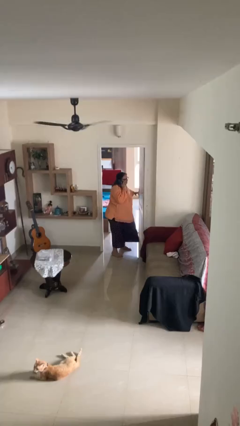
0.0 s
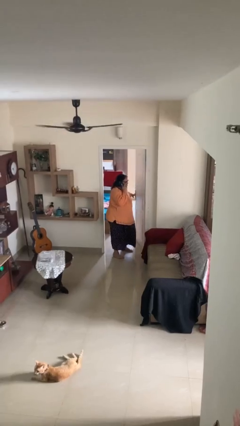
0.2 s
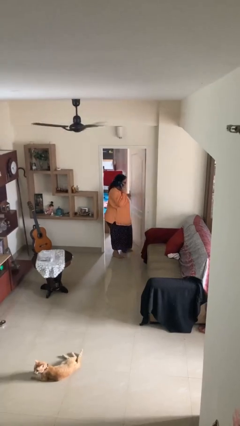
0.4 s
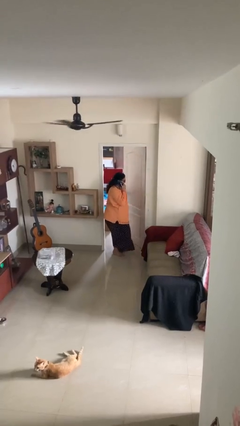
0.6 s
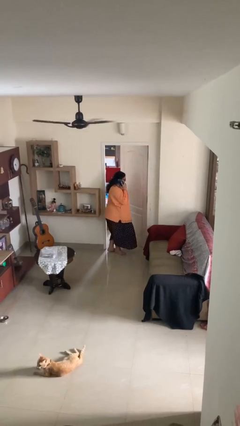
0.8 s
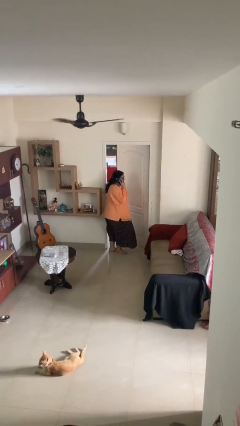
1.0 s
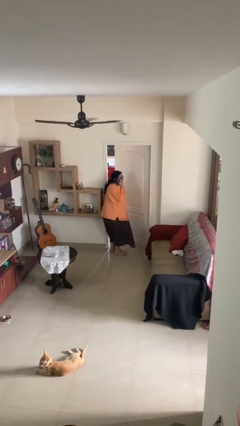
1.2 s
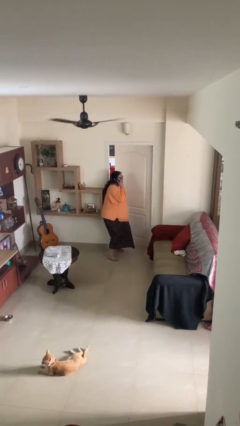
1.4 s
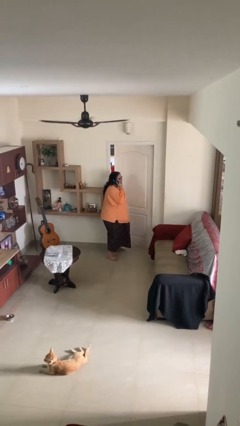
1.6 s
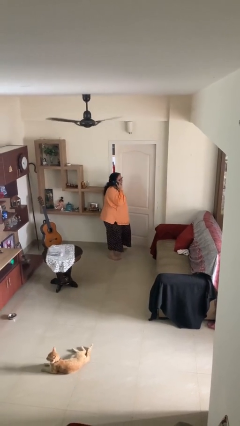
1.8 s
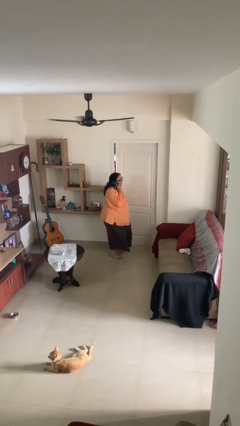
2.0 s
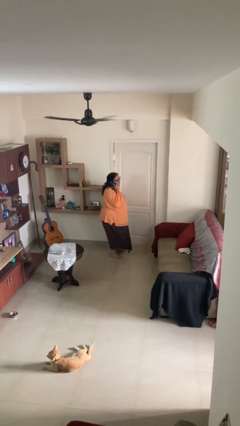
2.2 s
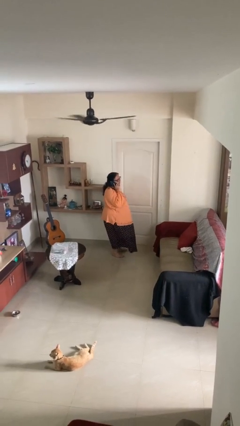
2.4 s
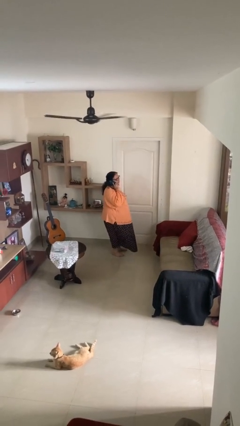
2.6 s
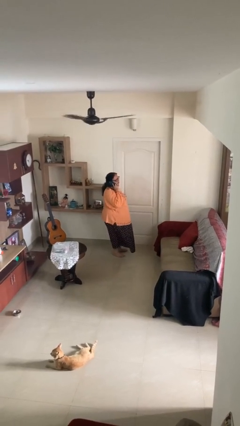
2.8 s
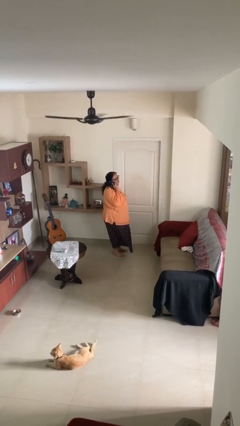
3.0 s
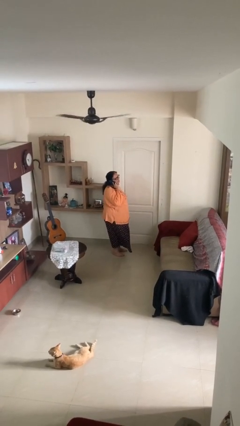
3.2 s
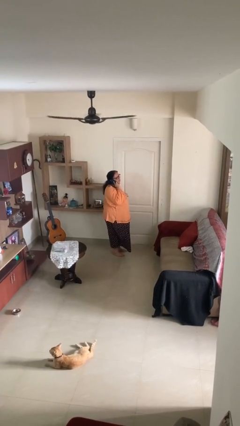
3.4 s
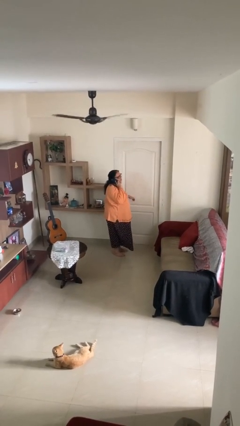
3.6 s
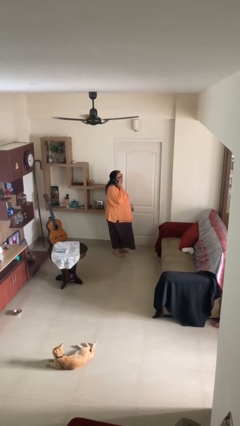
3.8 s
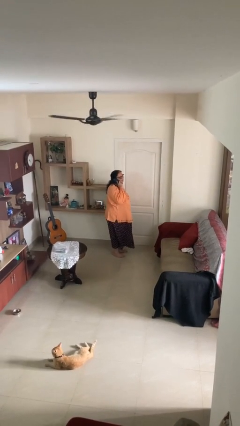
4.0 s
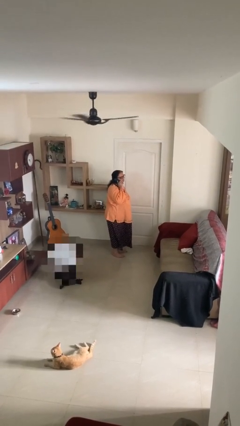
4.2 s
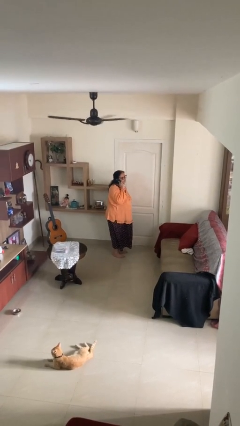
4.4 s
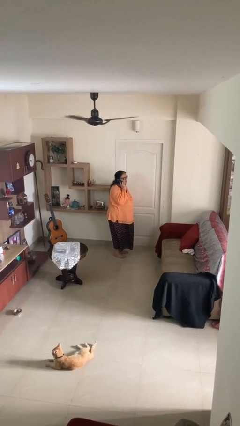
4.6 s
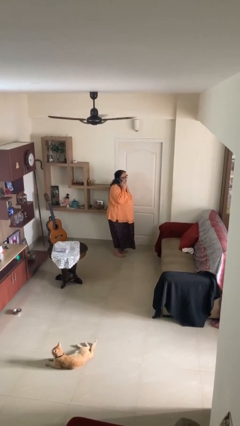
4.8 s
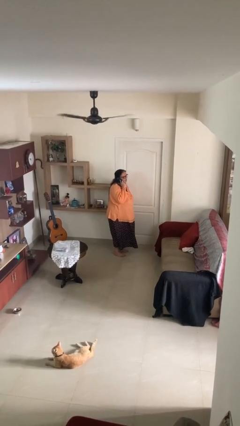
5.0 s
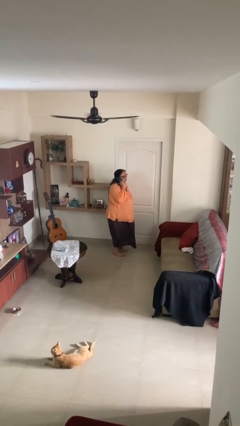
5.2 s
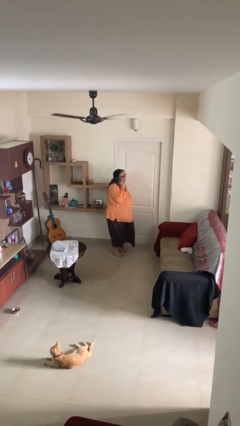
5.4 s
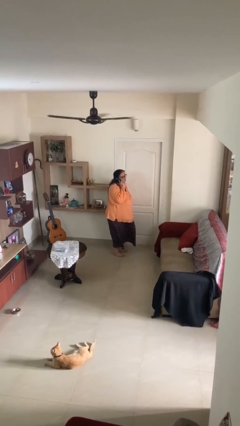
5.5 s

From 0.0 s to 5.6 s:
person closes facility door

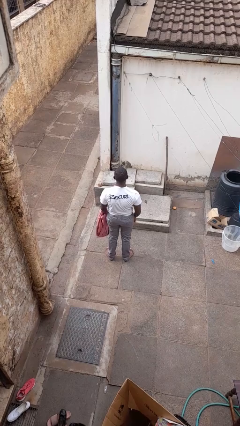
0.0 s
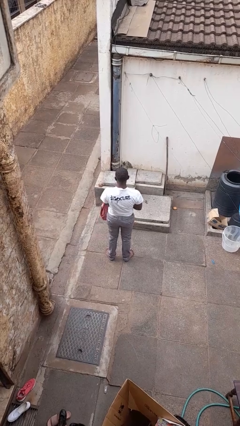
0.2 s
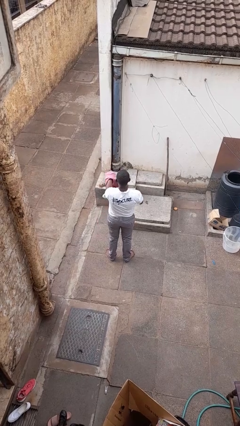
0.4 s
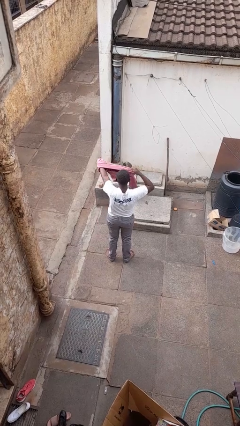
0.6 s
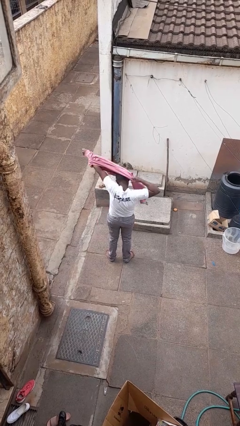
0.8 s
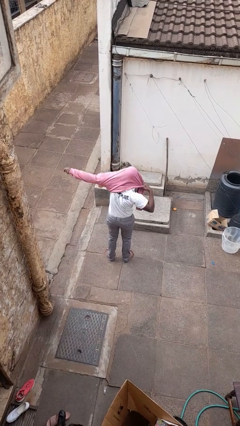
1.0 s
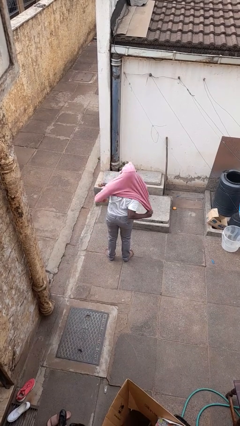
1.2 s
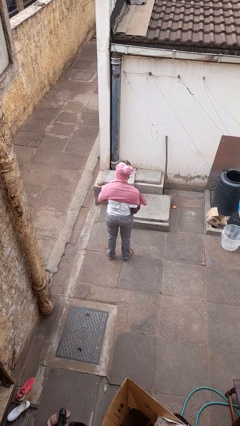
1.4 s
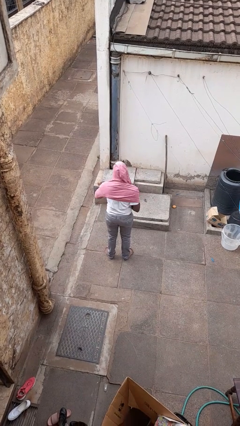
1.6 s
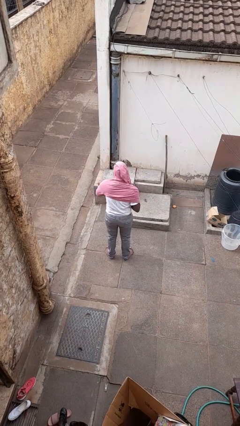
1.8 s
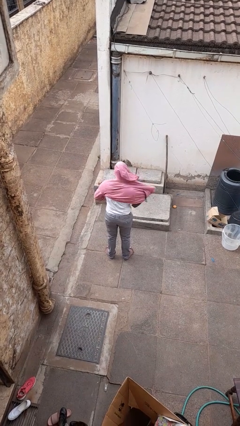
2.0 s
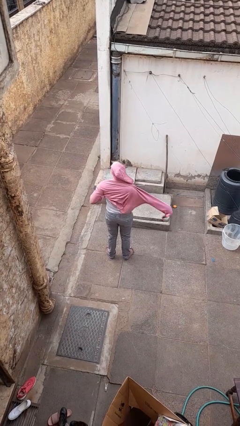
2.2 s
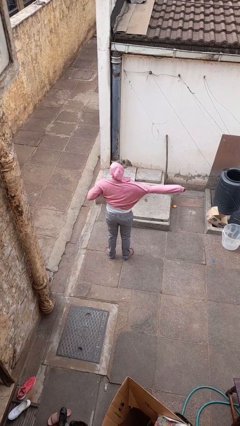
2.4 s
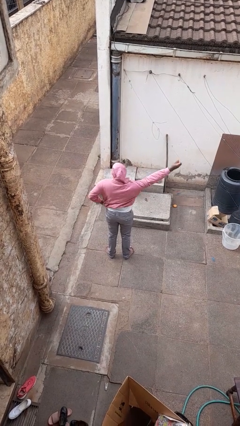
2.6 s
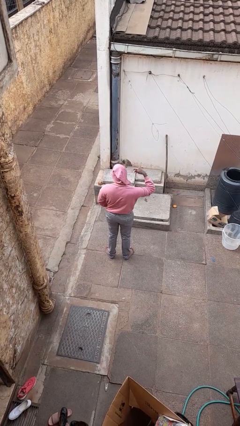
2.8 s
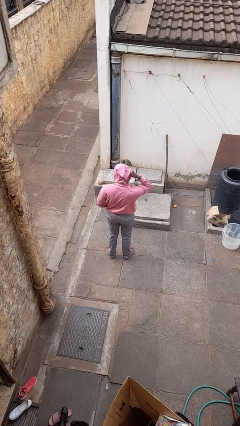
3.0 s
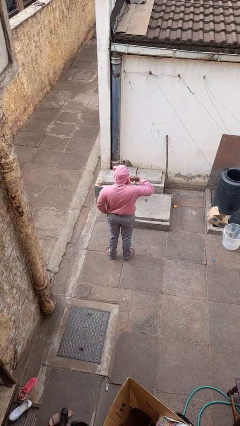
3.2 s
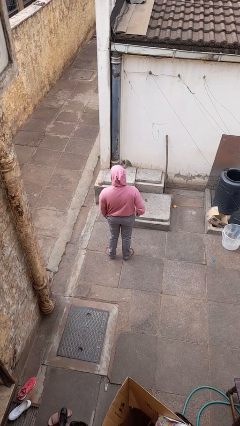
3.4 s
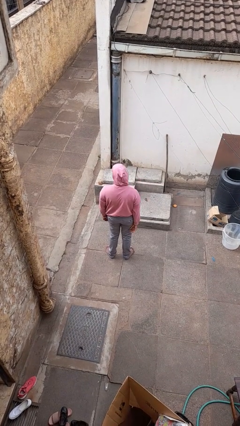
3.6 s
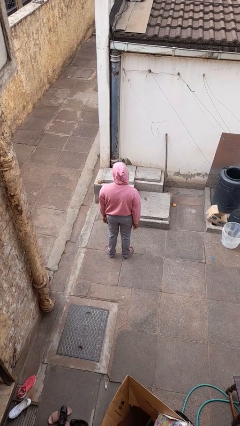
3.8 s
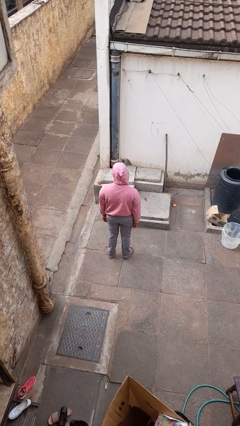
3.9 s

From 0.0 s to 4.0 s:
person puts on hoodie

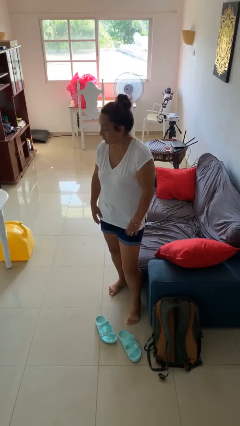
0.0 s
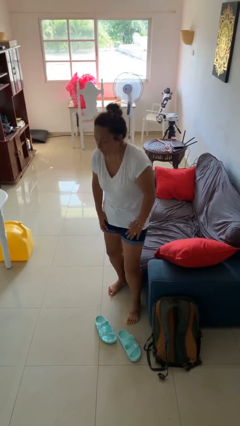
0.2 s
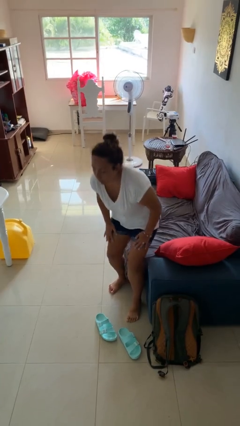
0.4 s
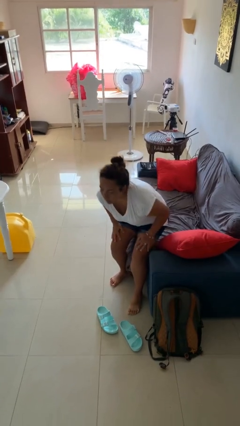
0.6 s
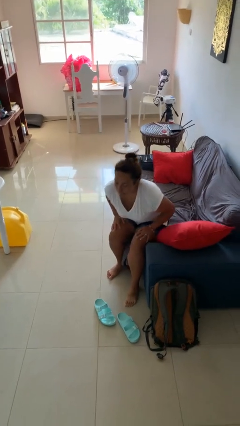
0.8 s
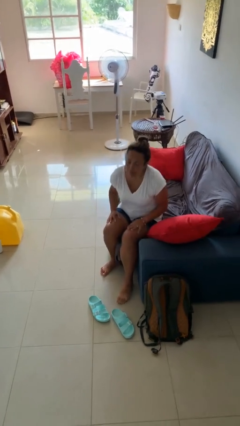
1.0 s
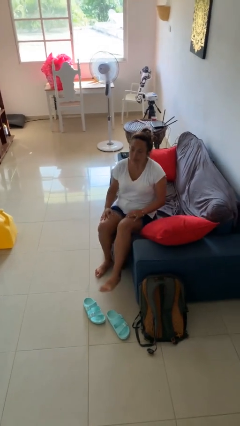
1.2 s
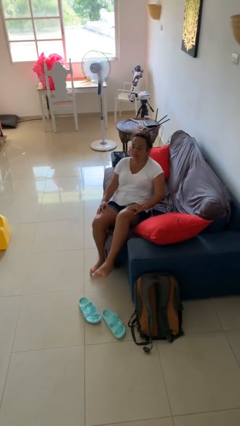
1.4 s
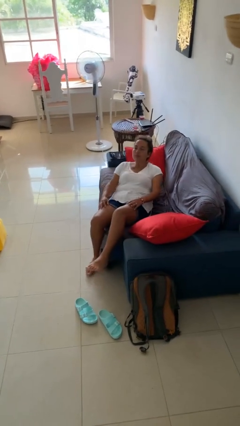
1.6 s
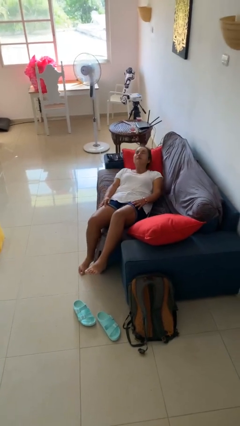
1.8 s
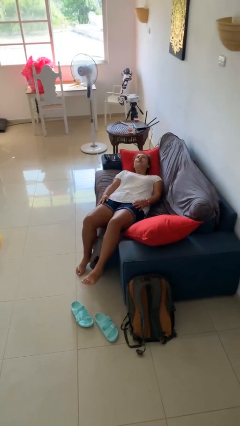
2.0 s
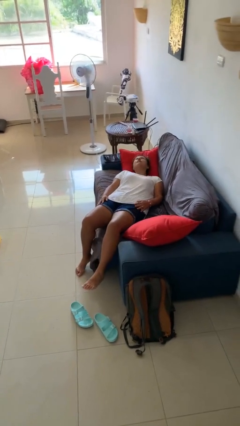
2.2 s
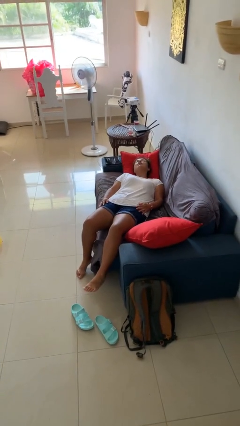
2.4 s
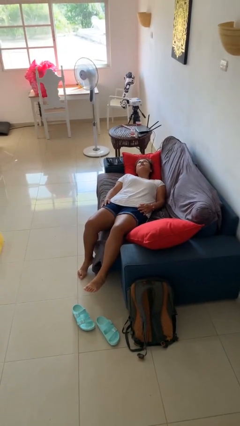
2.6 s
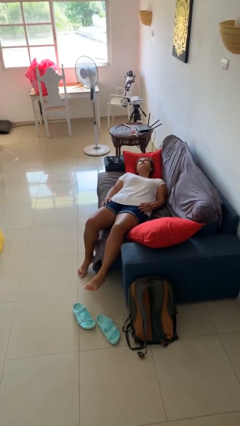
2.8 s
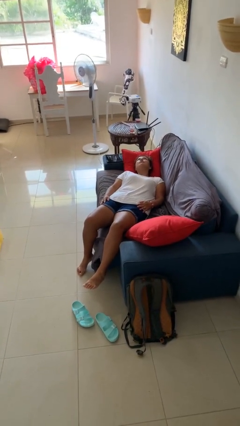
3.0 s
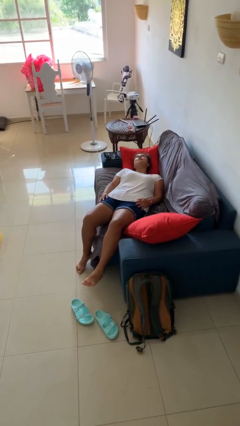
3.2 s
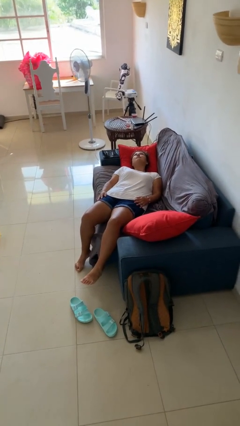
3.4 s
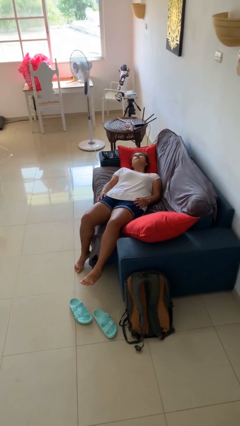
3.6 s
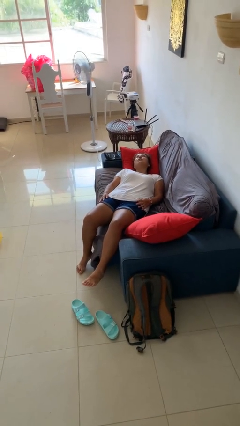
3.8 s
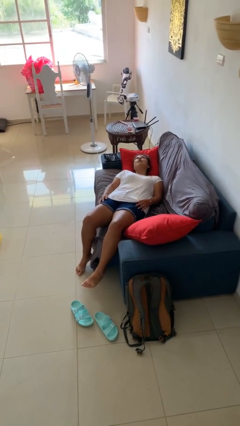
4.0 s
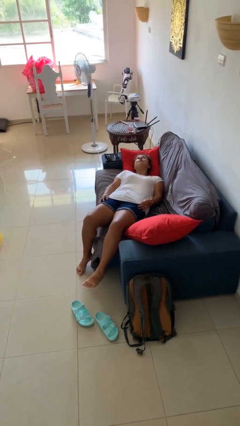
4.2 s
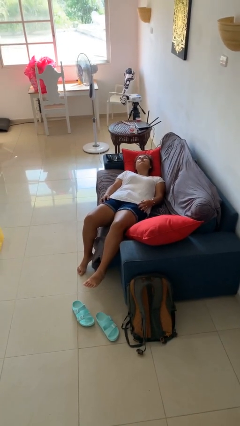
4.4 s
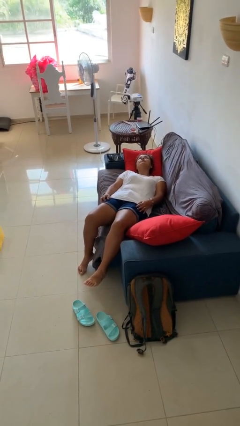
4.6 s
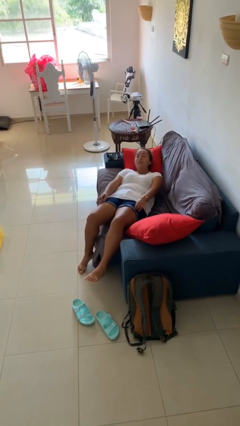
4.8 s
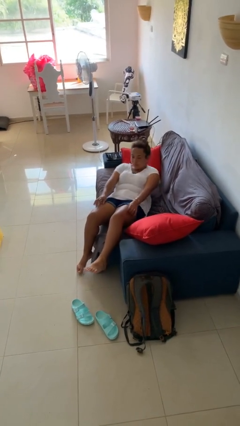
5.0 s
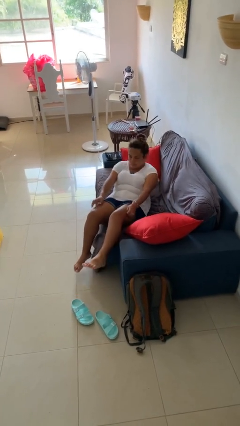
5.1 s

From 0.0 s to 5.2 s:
person lies down on couch

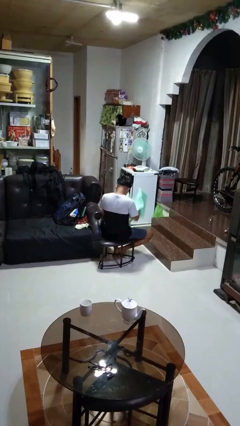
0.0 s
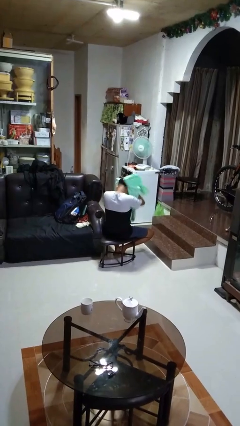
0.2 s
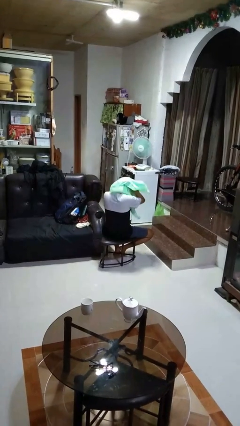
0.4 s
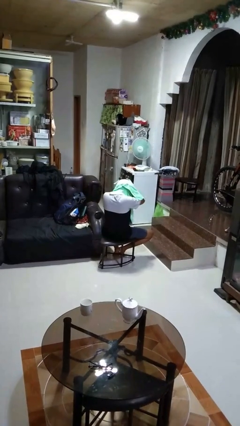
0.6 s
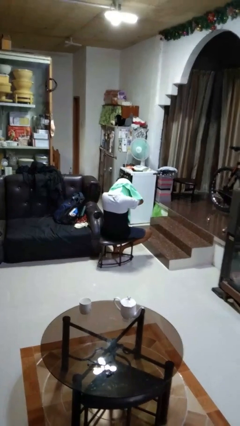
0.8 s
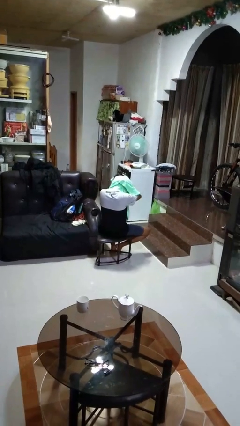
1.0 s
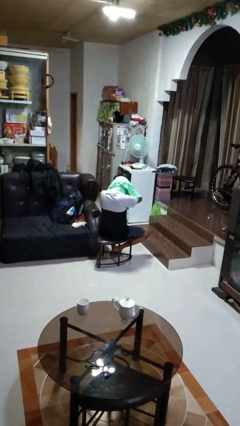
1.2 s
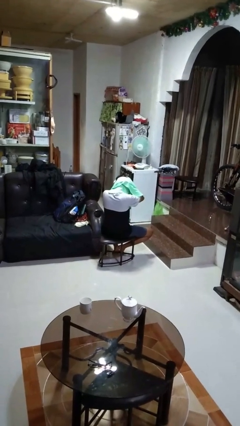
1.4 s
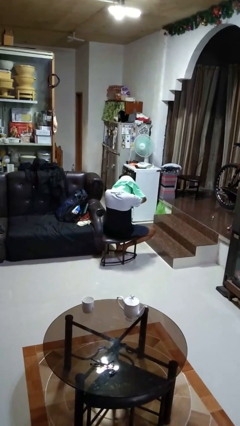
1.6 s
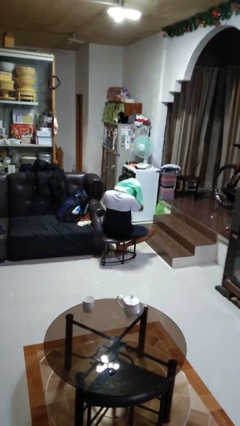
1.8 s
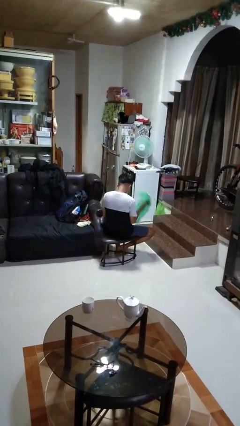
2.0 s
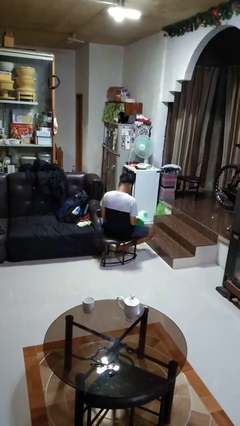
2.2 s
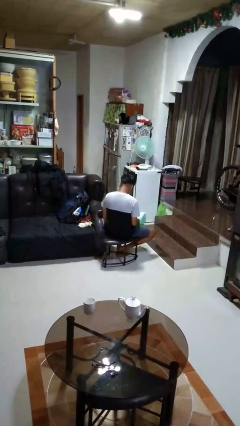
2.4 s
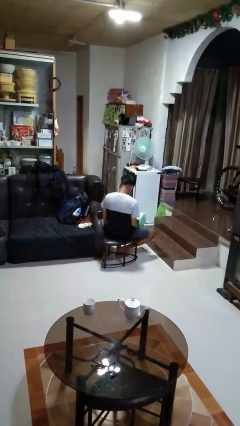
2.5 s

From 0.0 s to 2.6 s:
person dries hair with towel
